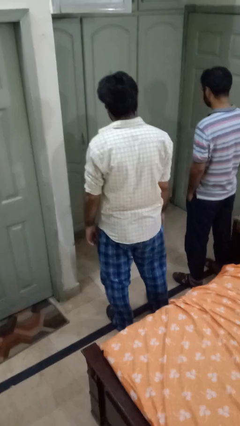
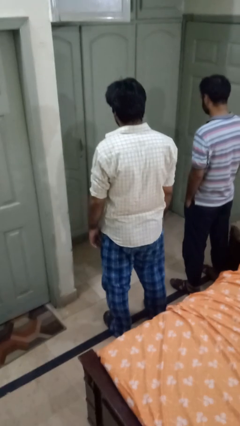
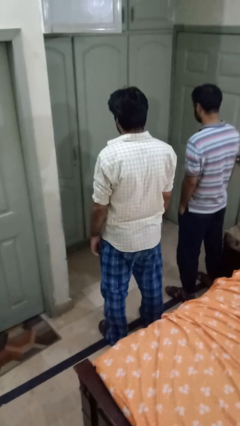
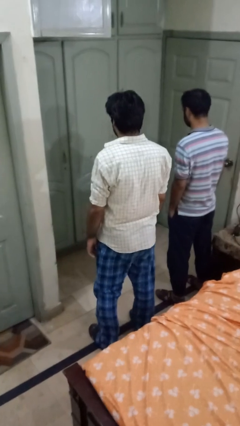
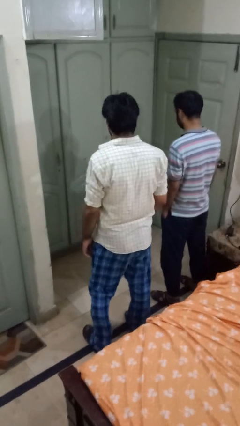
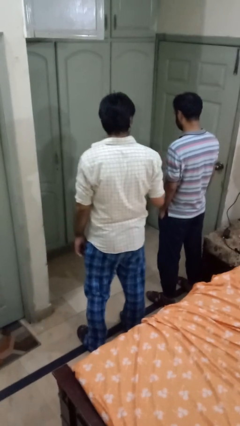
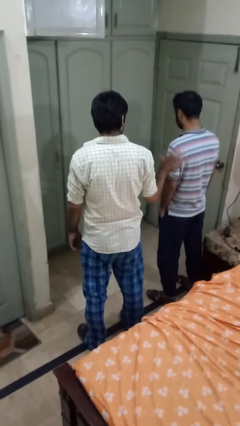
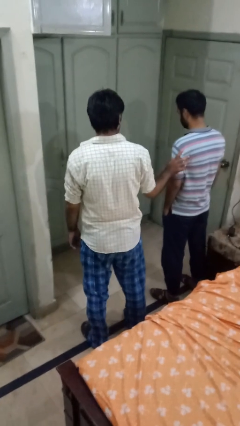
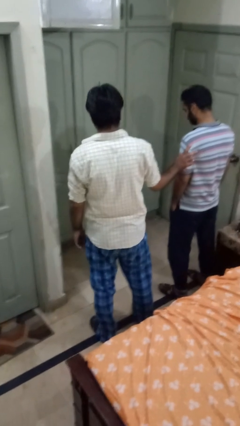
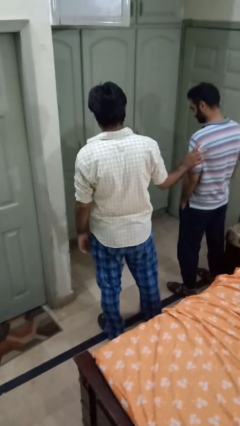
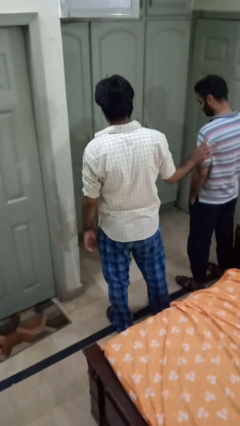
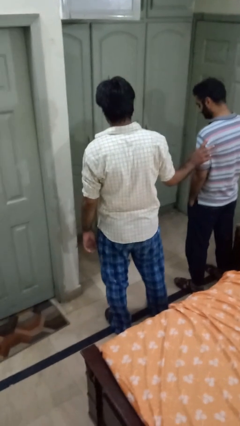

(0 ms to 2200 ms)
person grabs person by bicep

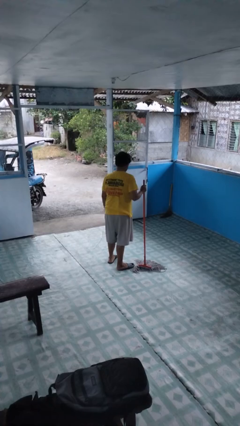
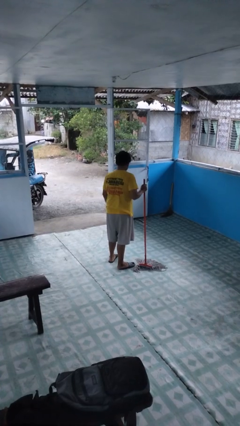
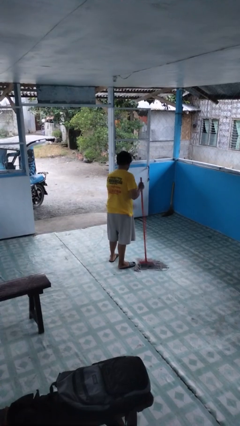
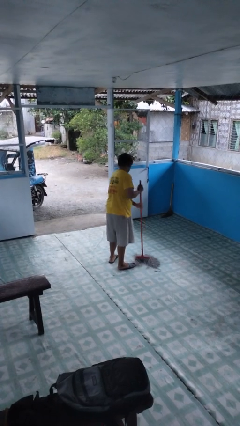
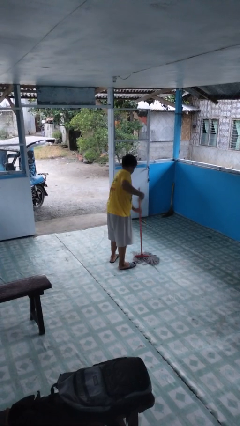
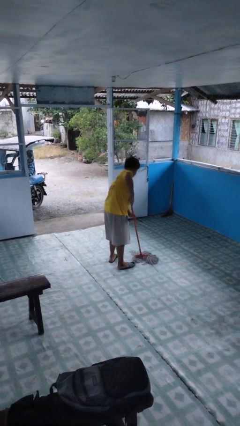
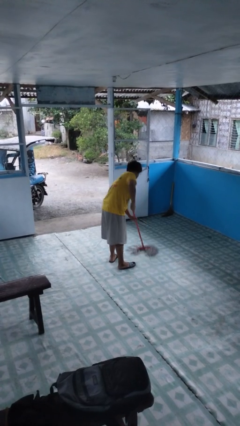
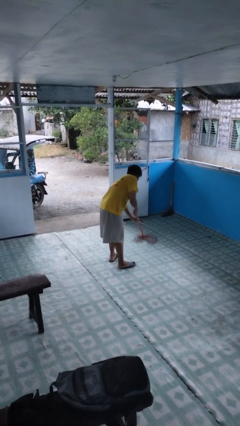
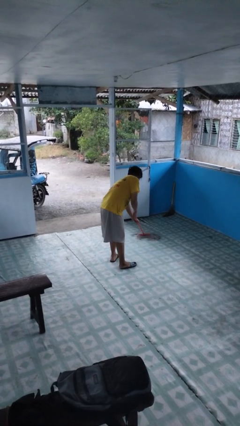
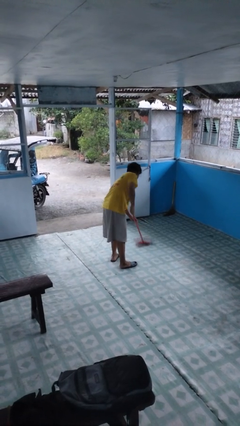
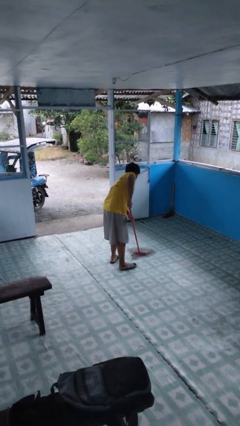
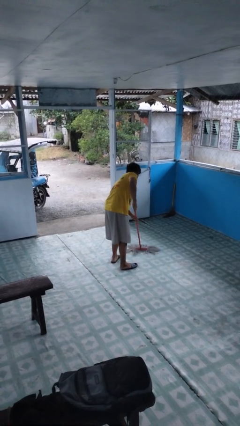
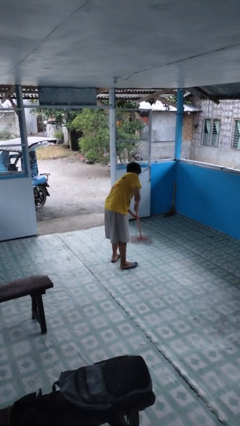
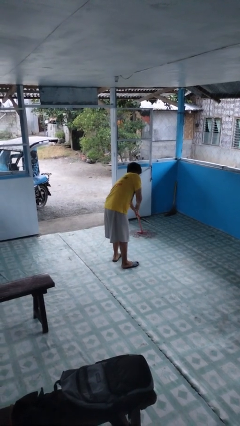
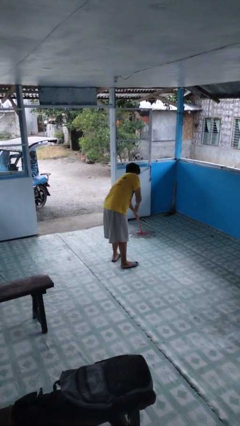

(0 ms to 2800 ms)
person mops

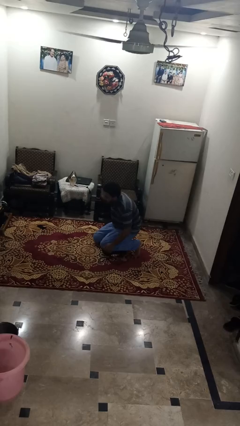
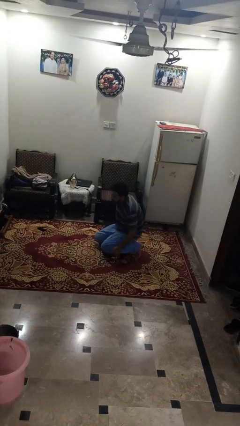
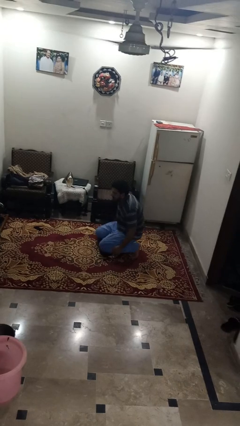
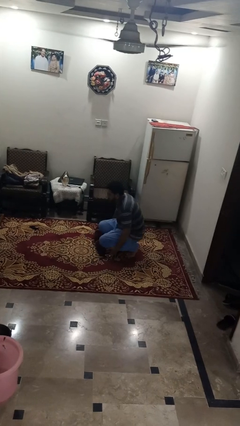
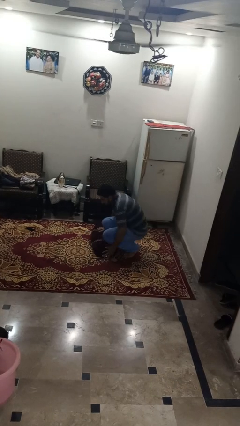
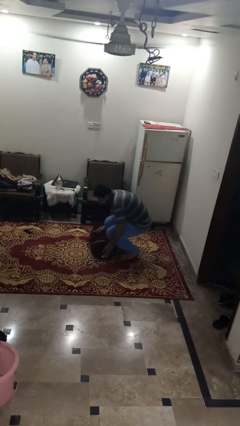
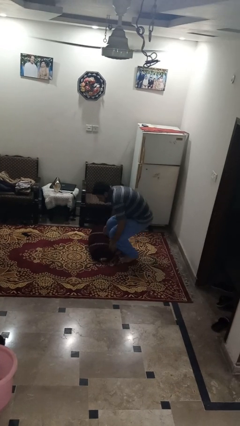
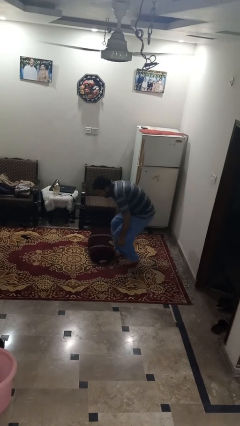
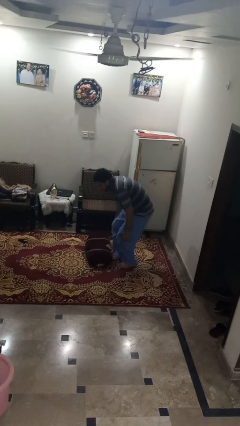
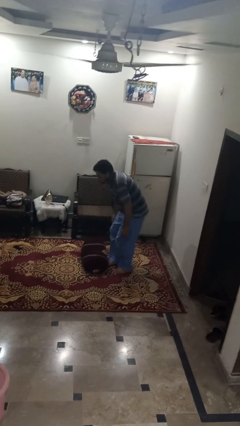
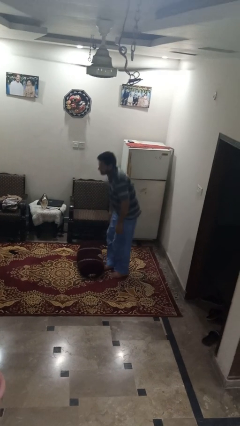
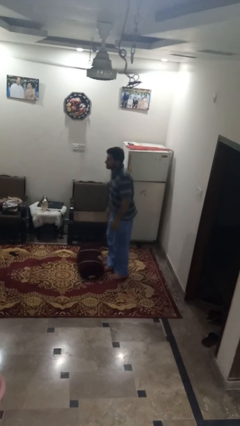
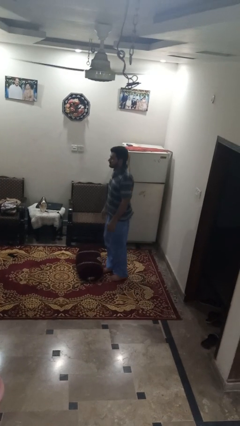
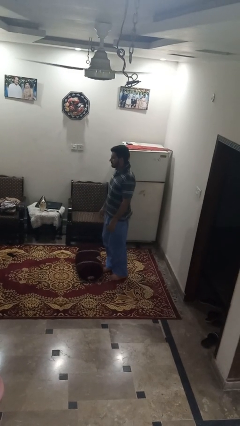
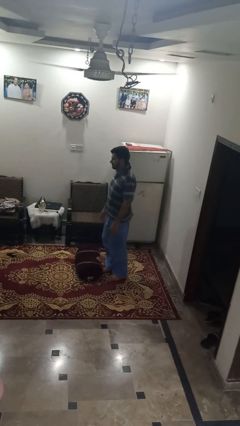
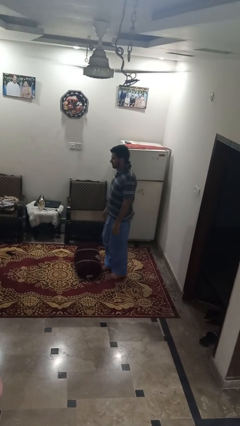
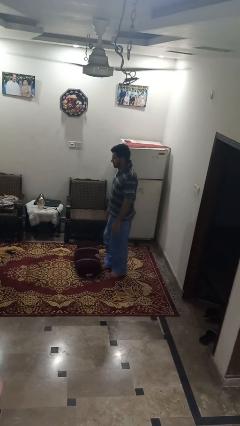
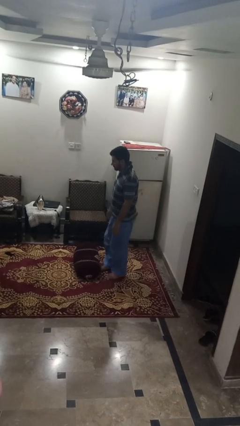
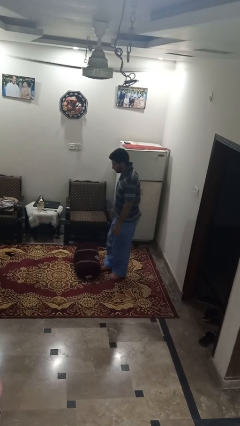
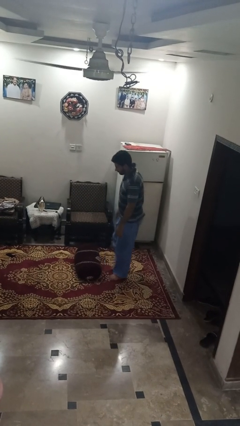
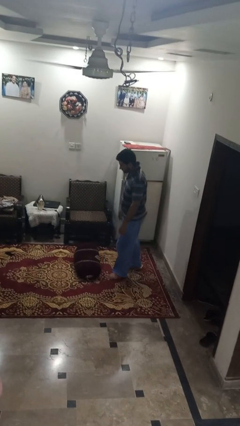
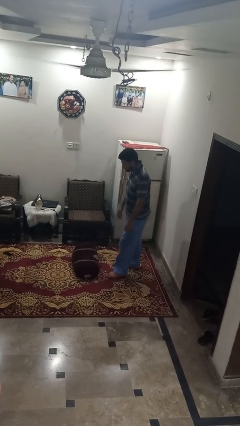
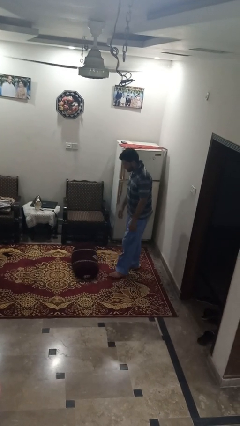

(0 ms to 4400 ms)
person stands up from floor

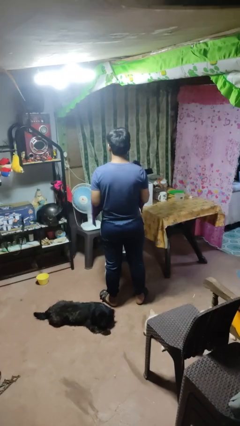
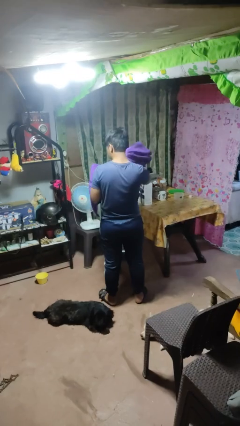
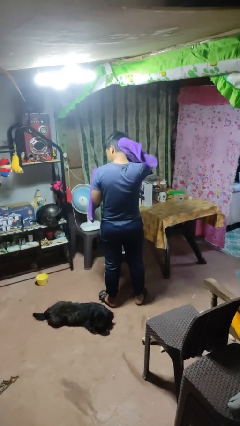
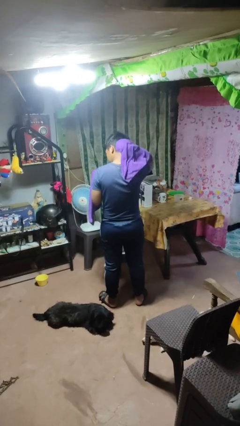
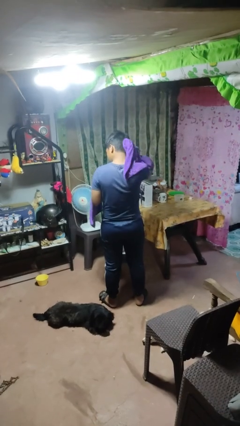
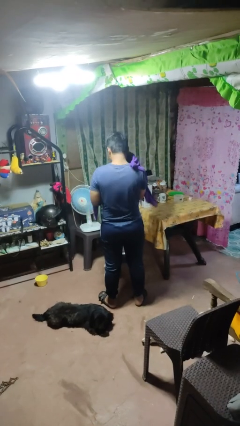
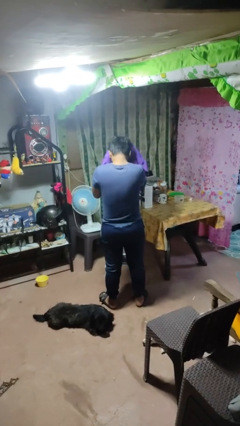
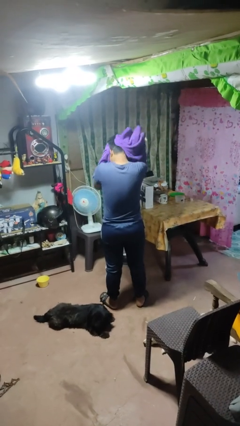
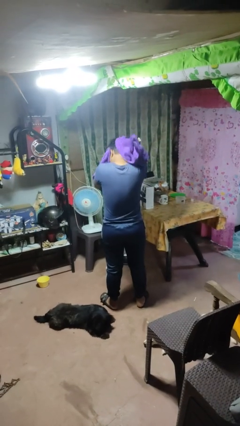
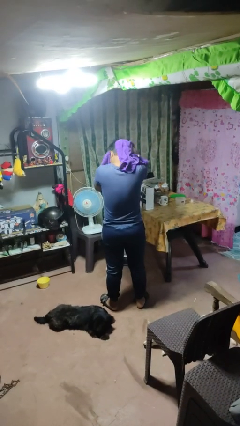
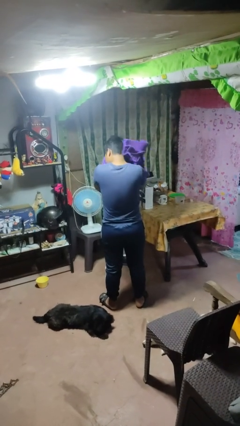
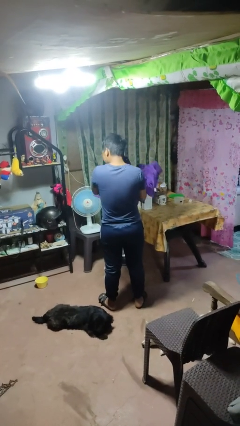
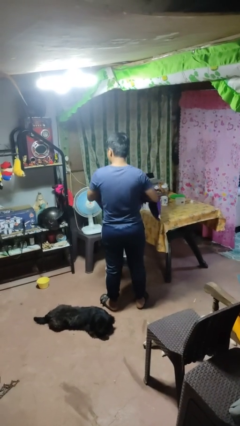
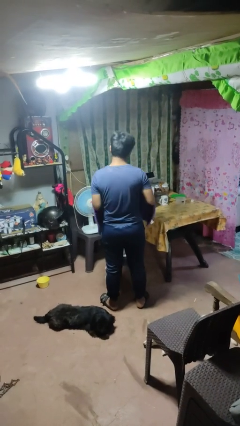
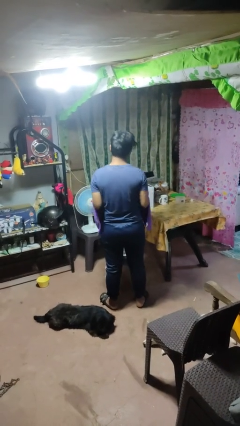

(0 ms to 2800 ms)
person dries hair with towel

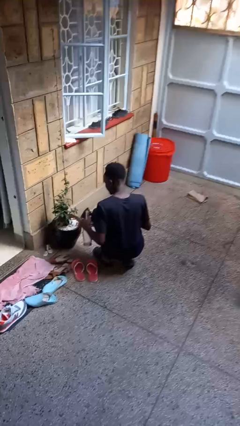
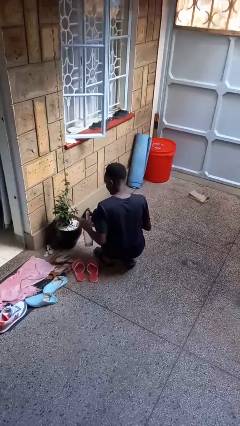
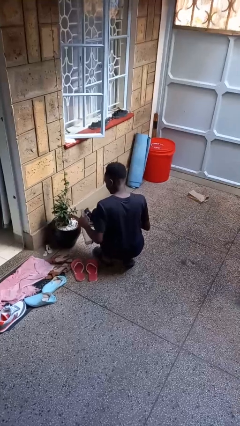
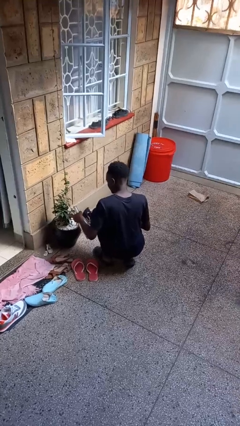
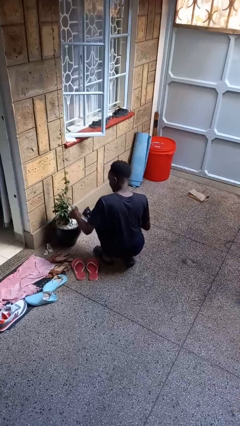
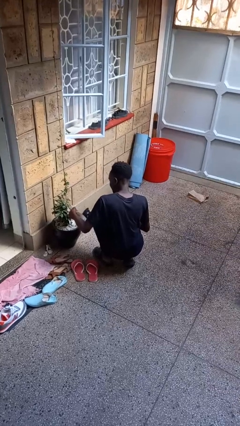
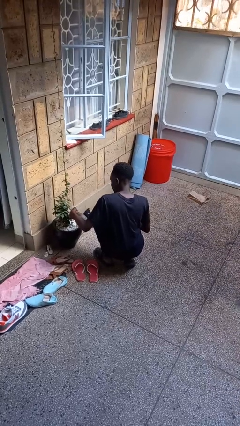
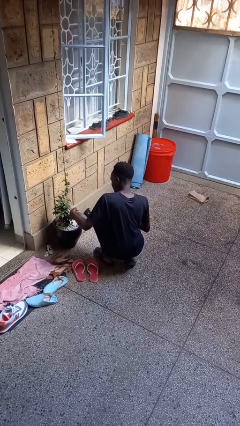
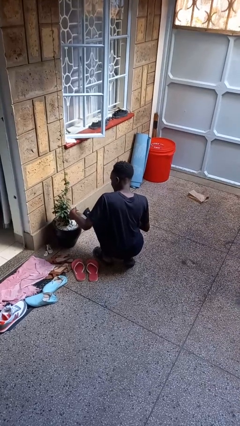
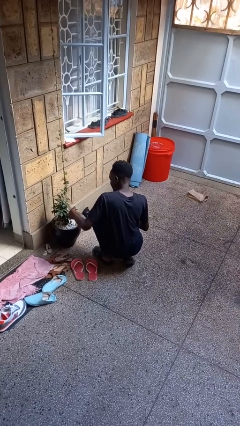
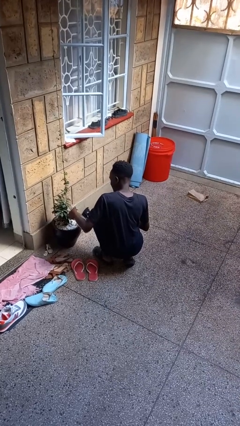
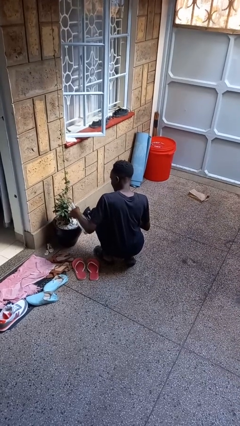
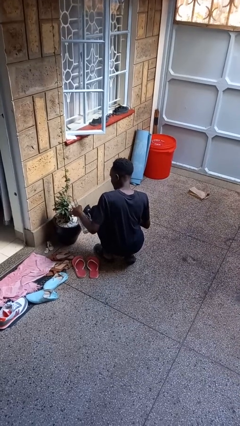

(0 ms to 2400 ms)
person waters houseplant

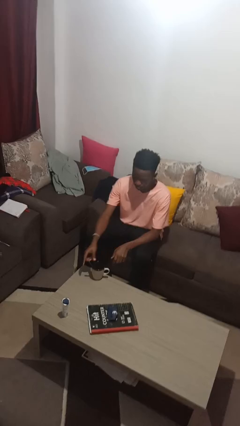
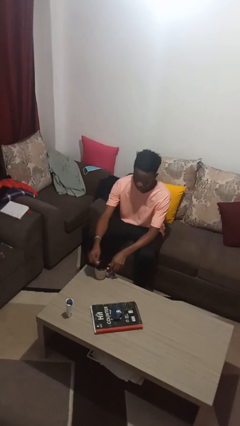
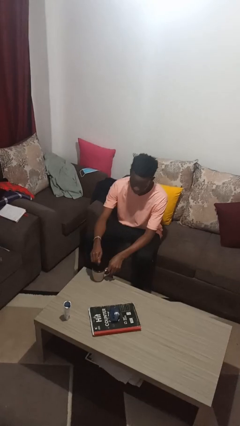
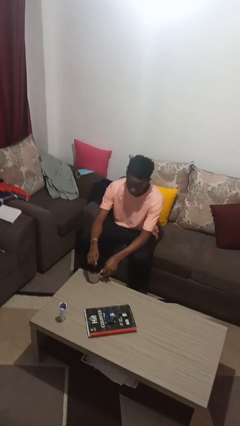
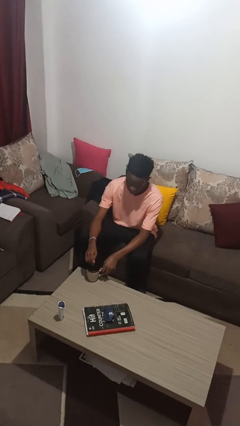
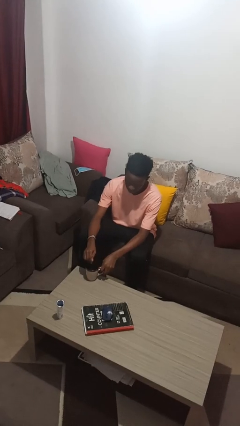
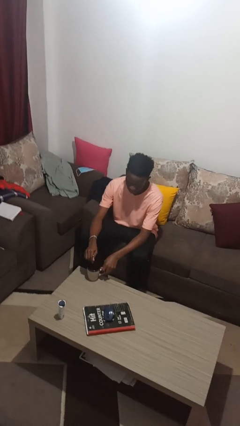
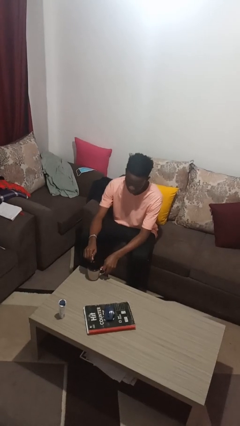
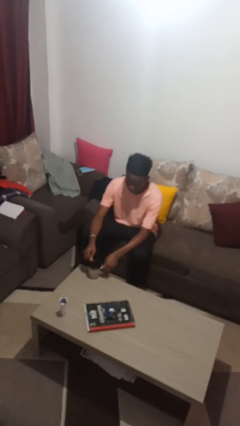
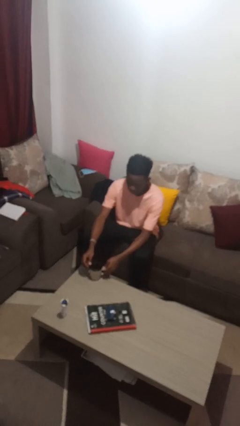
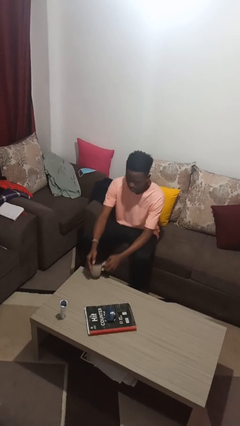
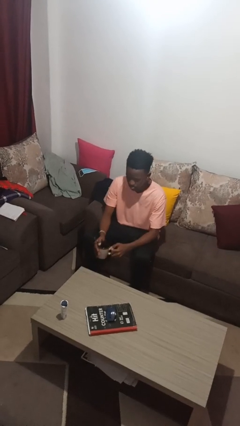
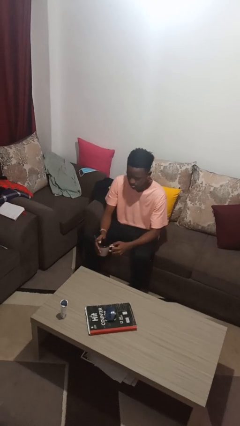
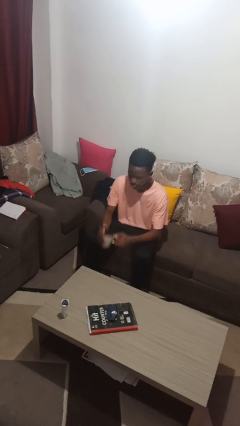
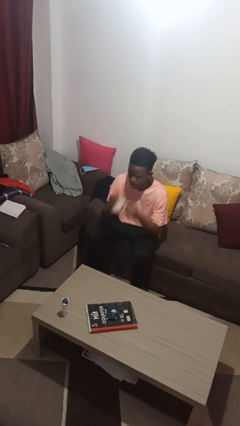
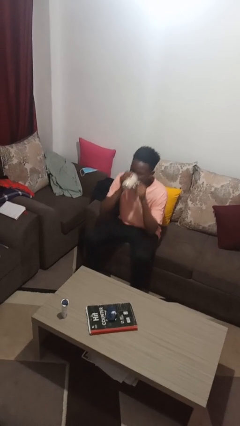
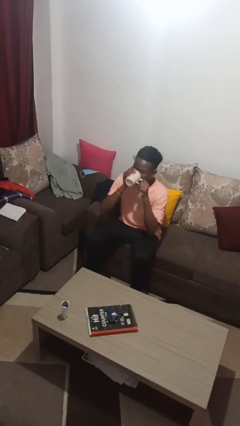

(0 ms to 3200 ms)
person stirs mug
